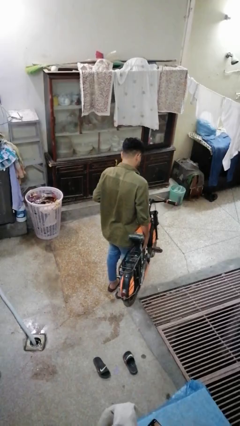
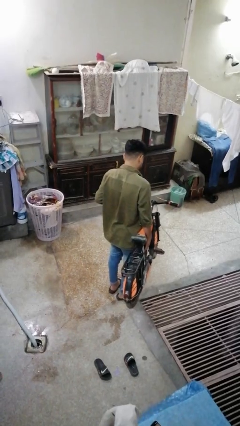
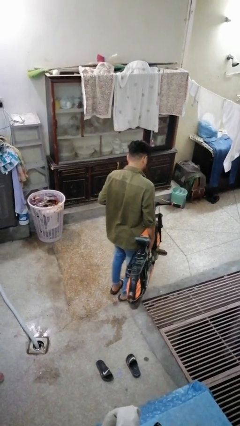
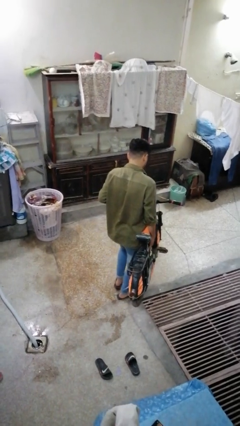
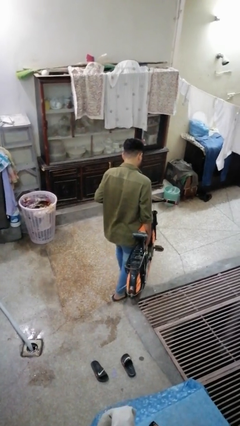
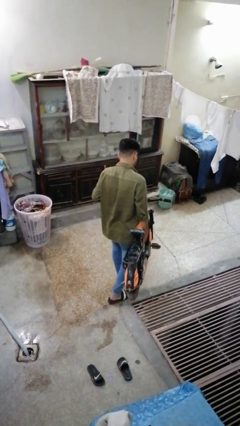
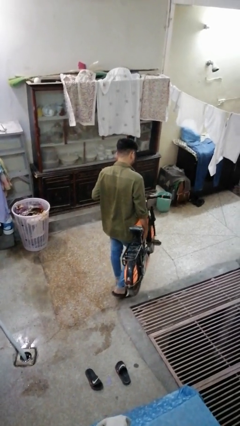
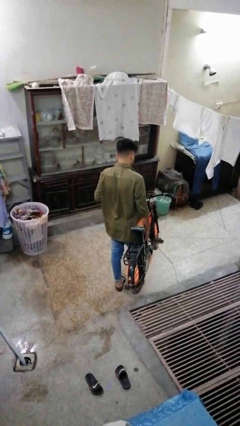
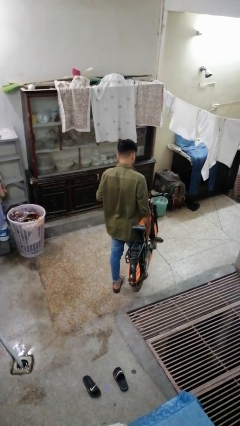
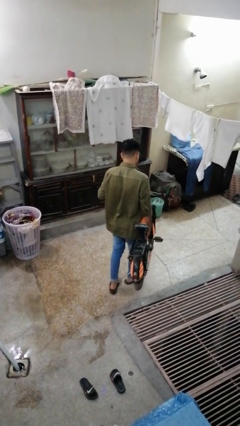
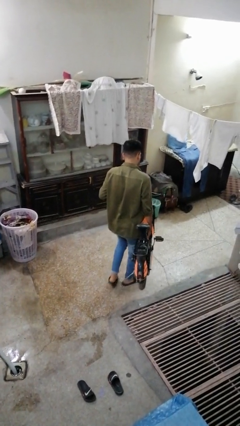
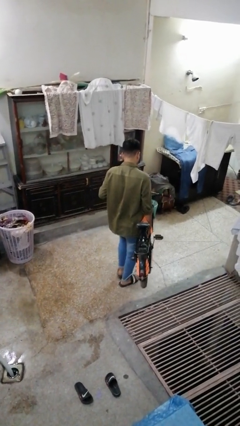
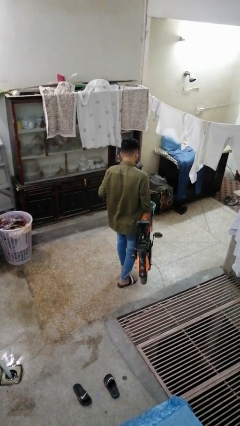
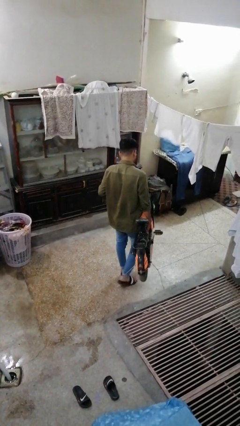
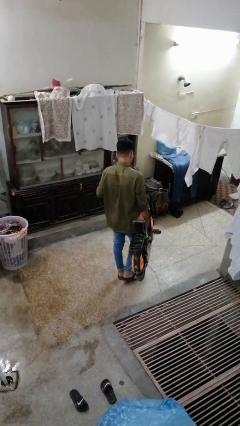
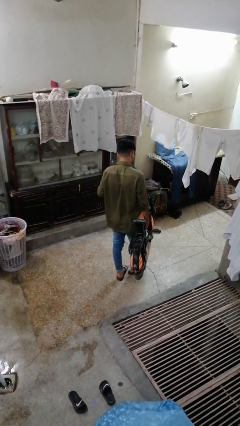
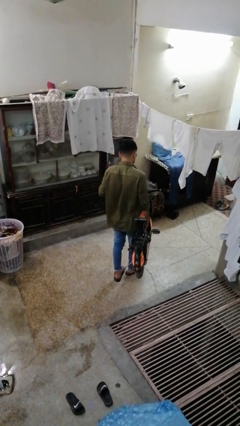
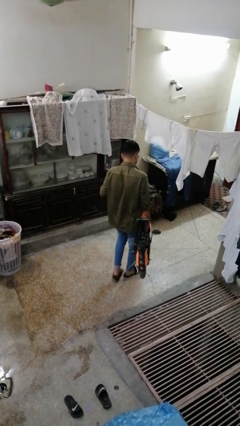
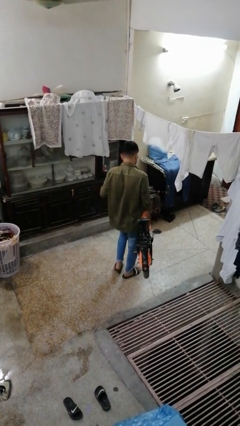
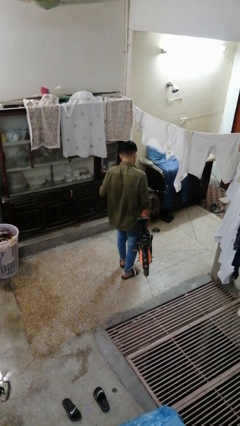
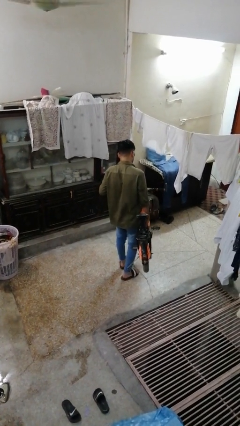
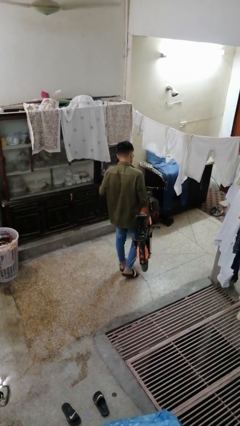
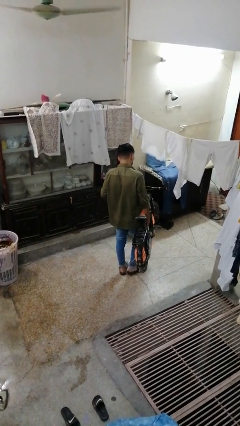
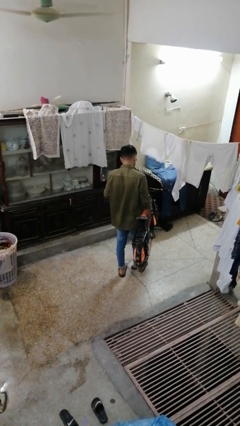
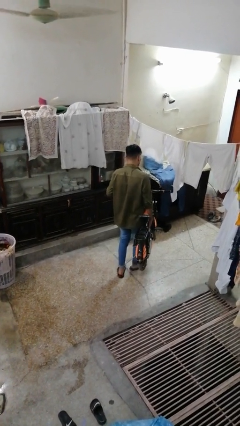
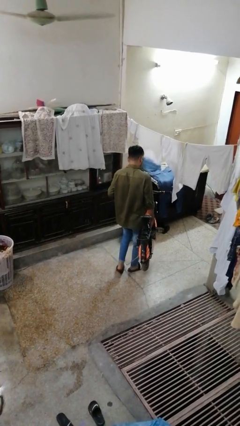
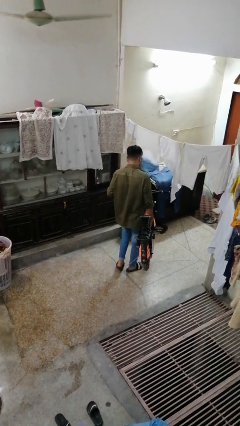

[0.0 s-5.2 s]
person carries bicycle

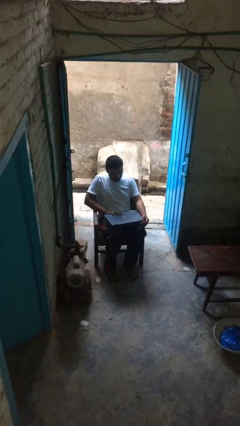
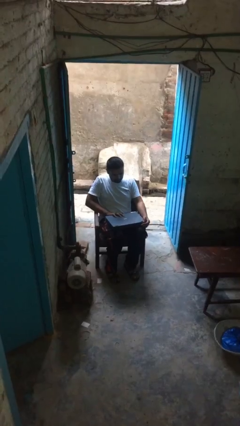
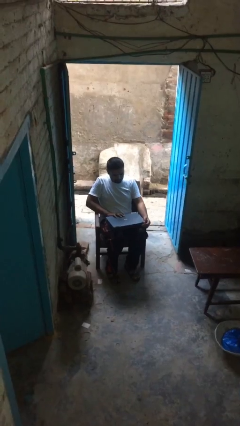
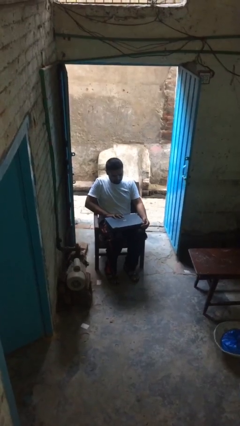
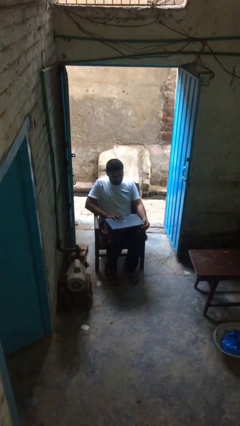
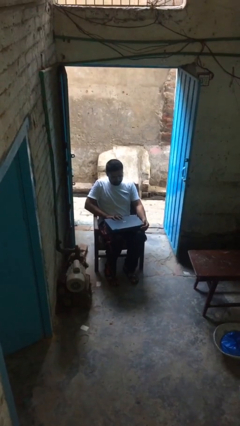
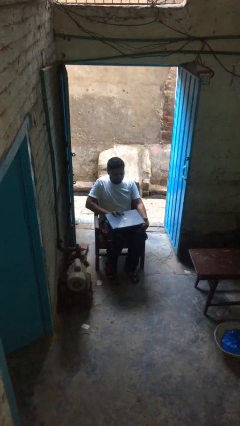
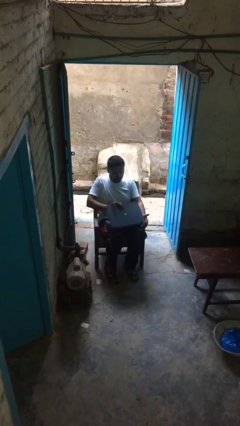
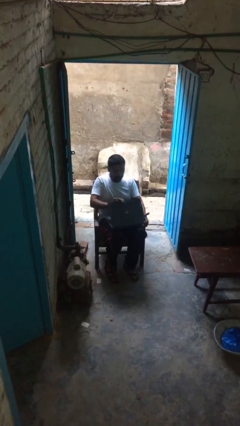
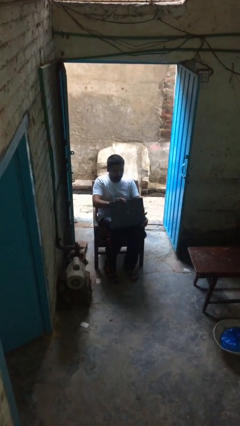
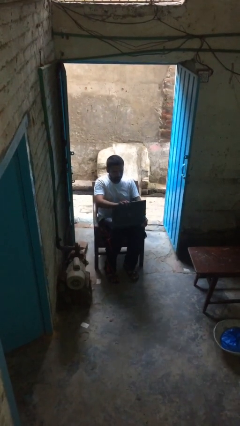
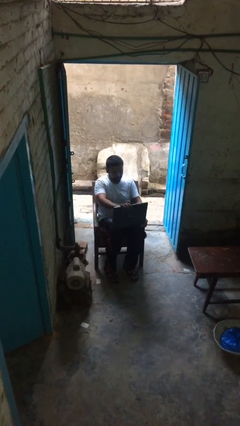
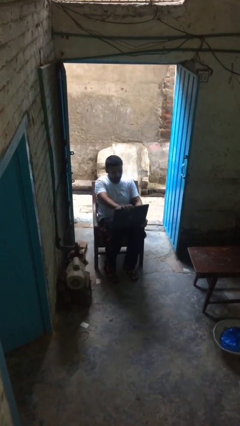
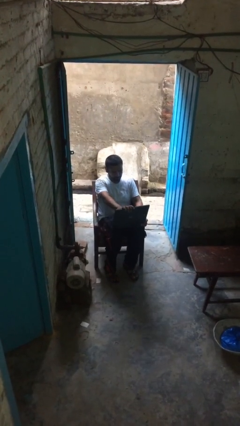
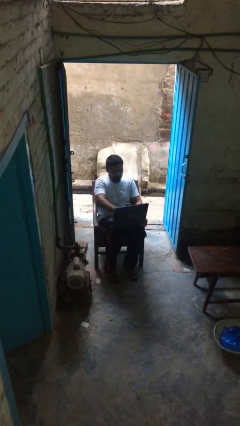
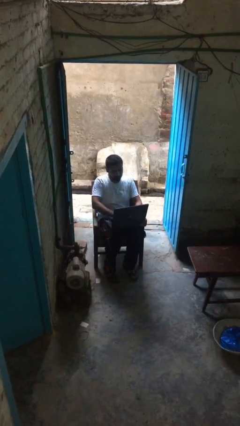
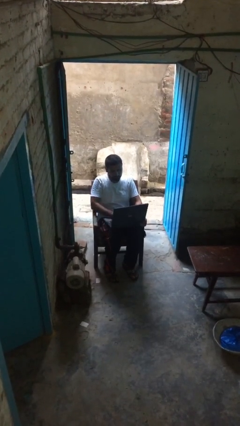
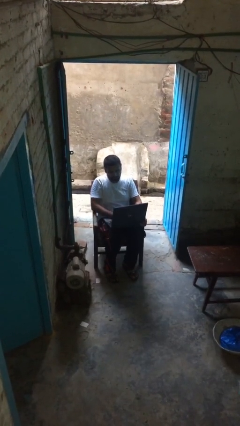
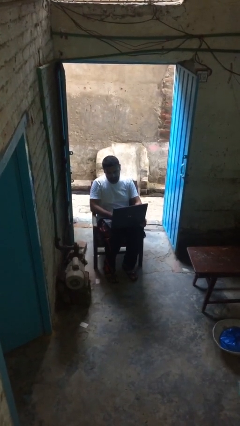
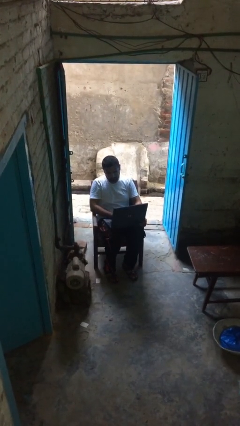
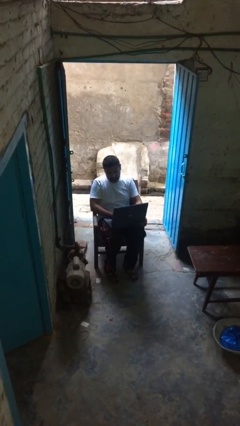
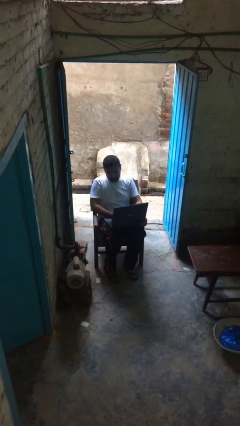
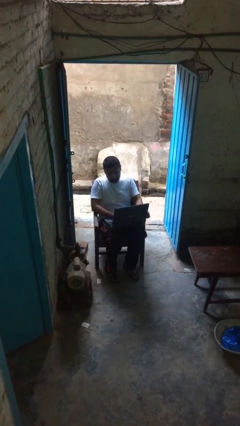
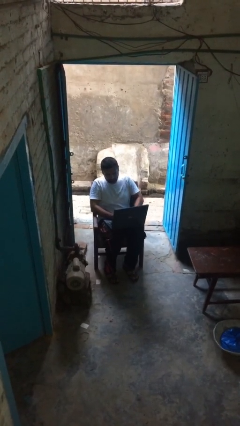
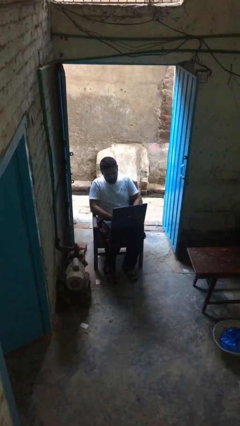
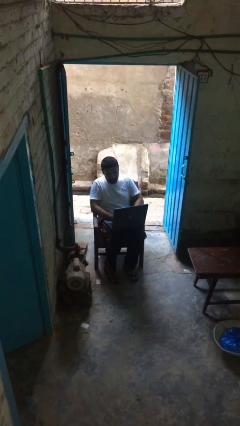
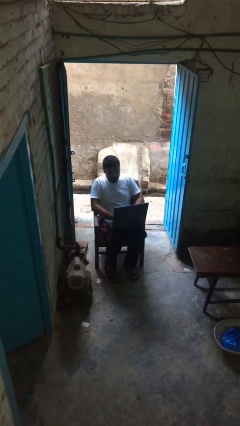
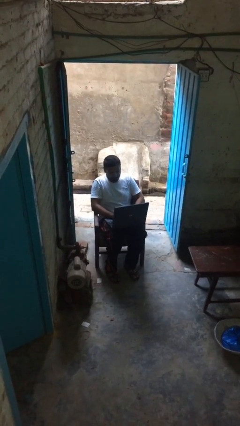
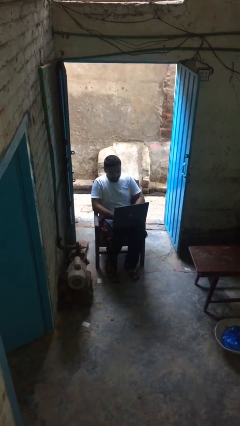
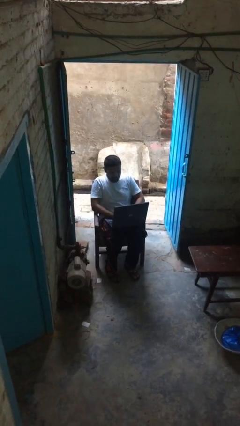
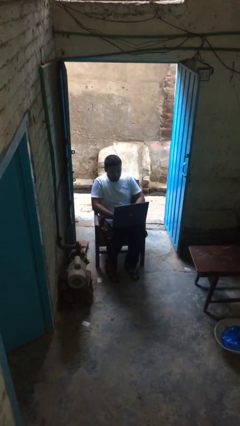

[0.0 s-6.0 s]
person interacts with laptop

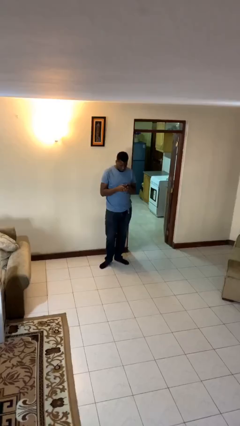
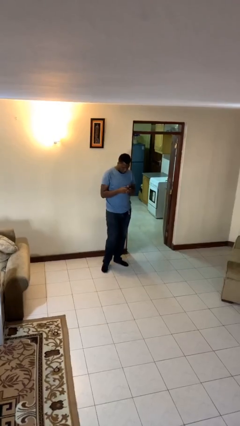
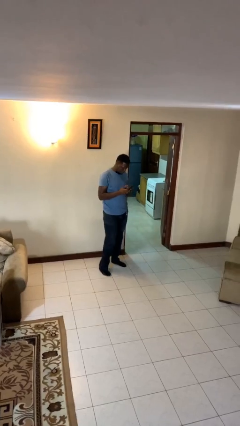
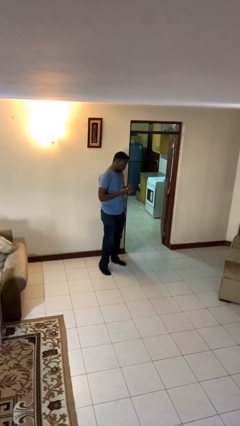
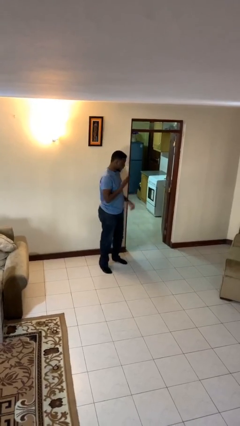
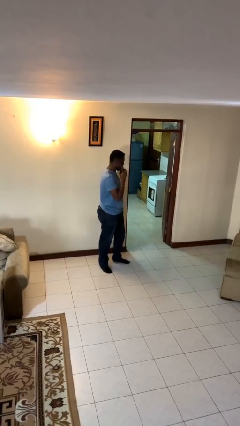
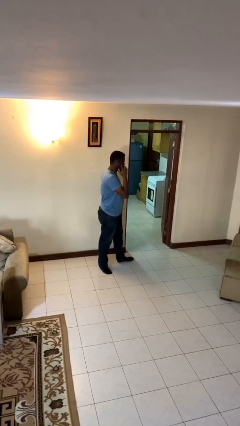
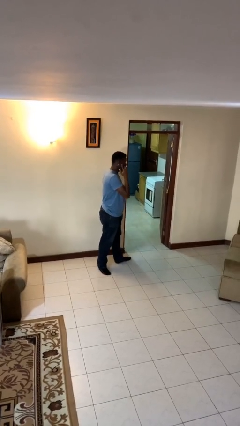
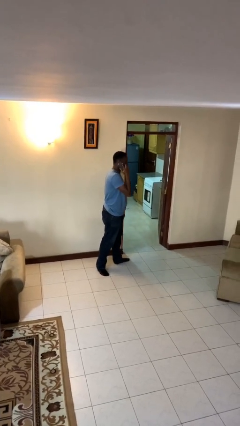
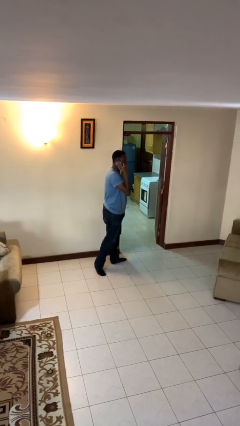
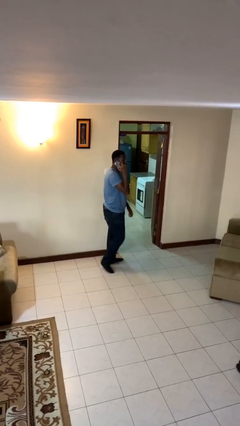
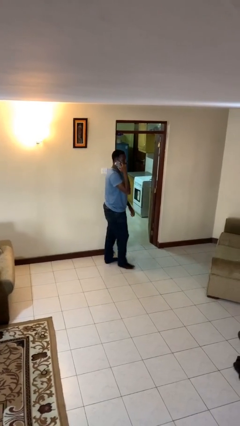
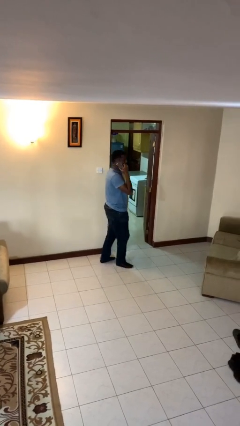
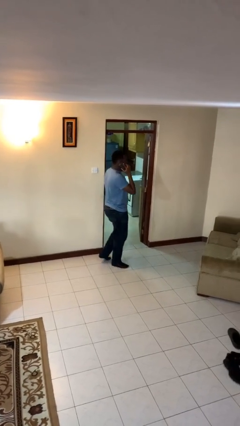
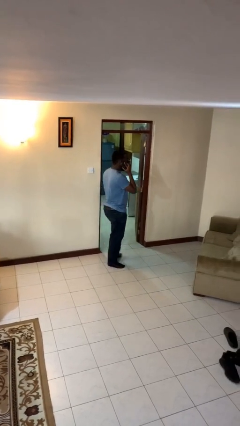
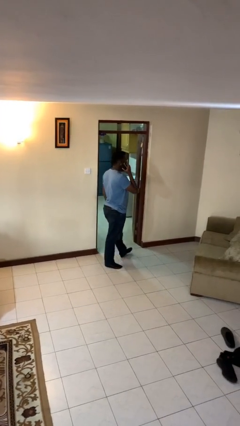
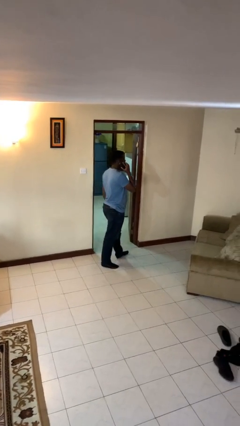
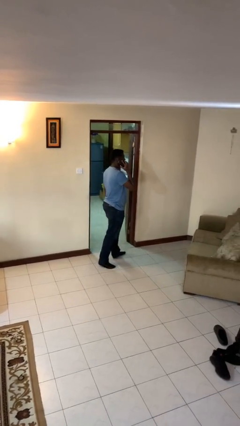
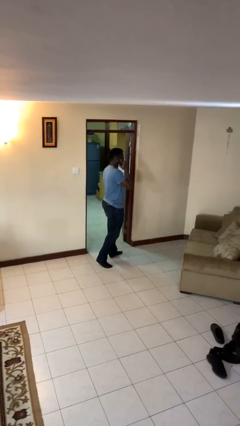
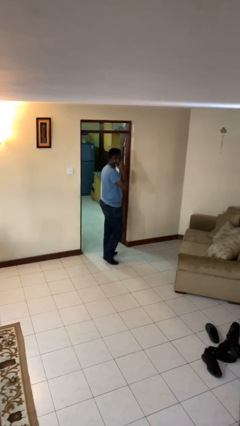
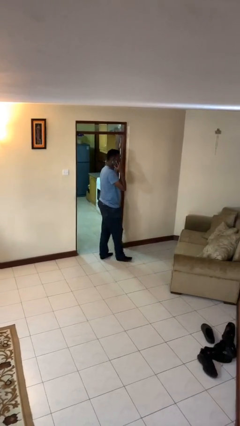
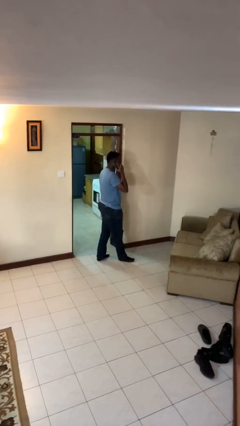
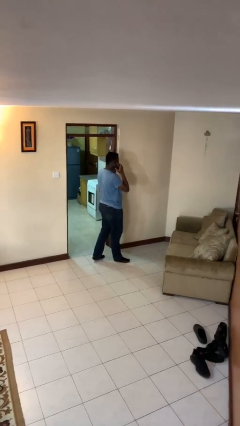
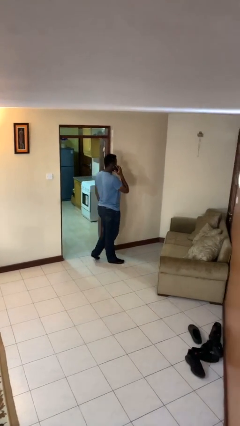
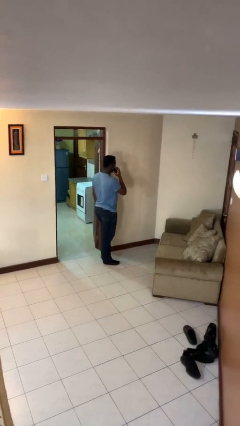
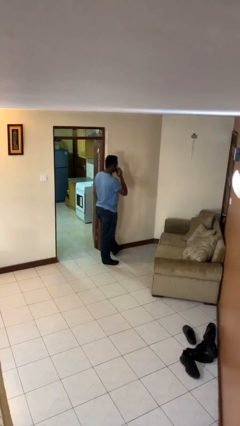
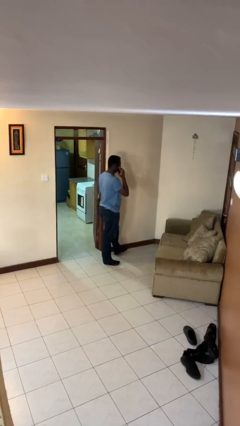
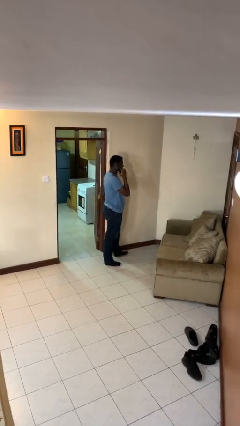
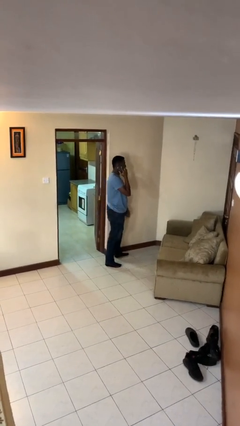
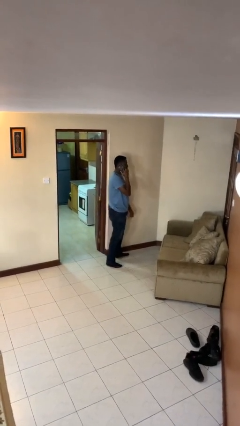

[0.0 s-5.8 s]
person talks on phone

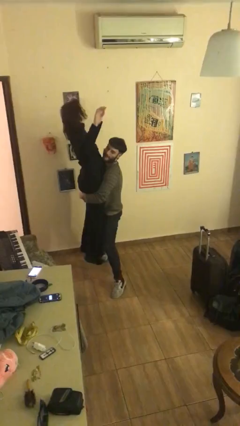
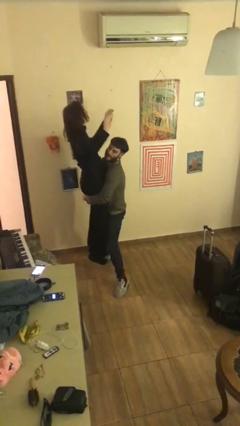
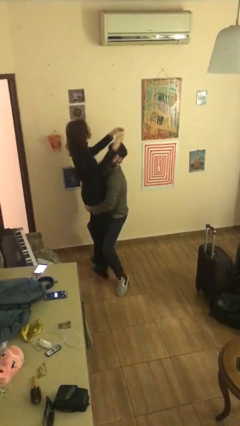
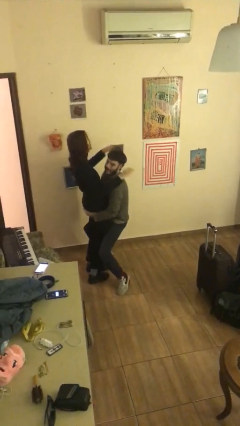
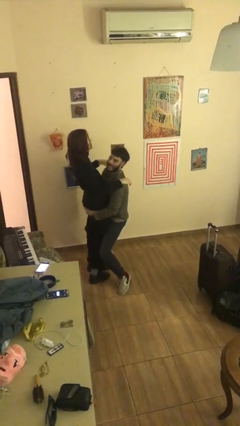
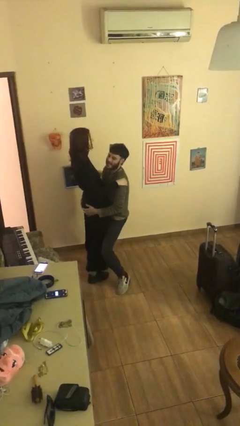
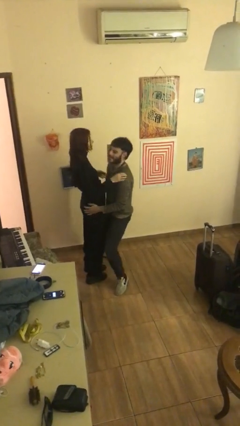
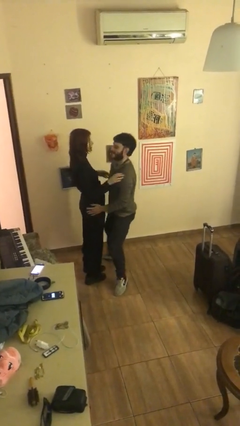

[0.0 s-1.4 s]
person puts down person
